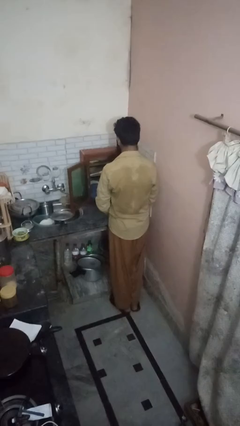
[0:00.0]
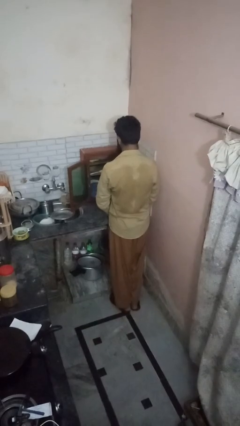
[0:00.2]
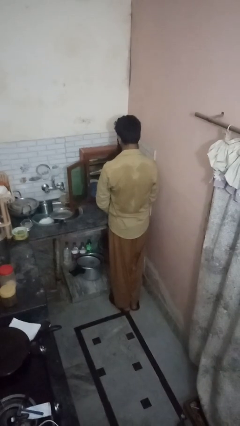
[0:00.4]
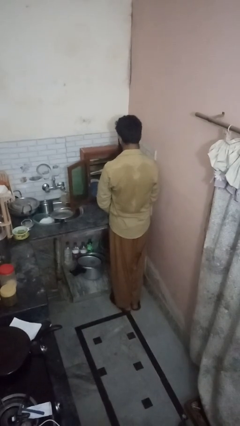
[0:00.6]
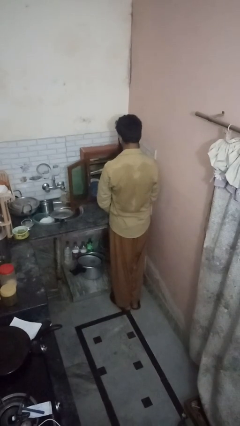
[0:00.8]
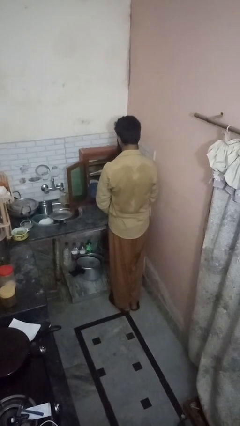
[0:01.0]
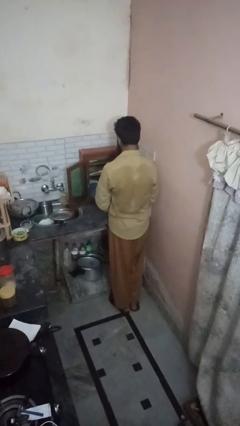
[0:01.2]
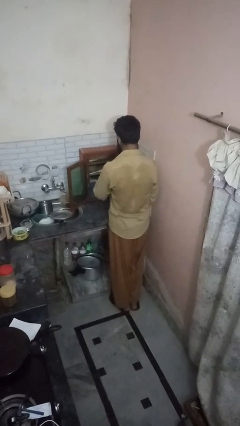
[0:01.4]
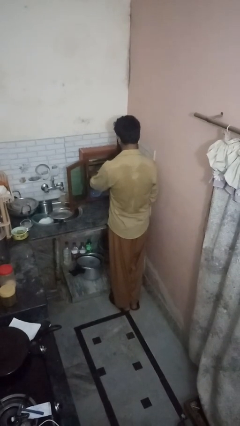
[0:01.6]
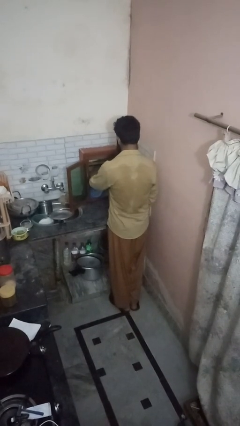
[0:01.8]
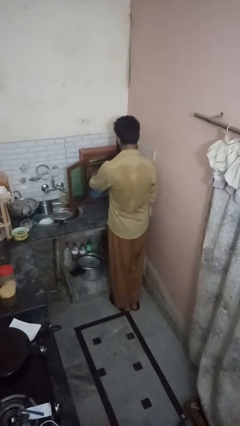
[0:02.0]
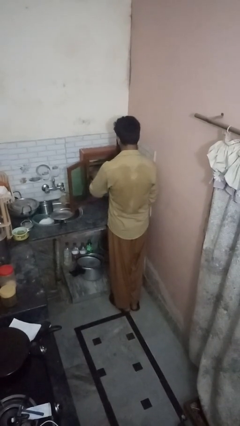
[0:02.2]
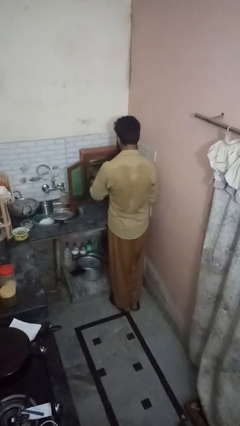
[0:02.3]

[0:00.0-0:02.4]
person puts object in cabinet

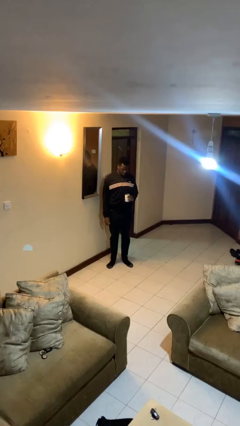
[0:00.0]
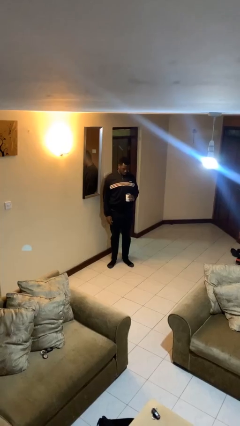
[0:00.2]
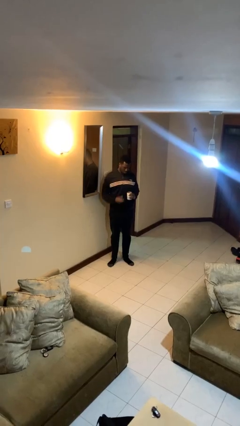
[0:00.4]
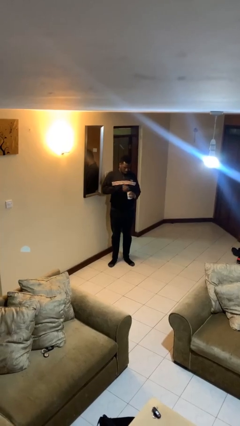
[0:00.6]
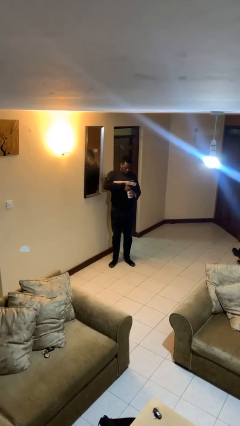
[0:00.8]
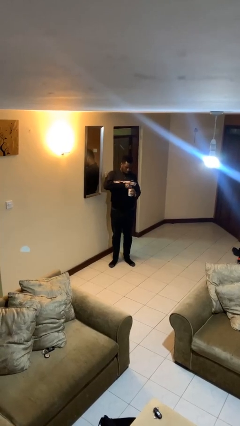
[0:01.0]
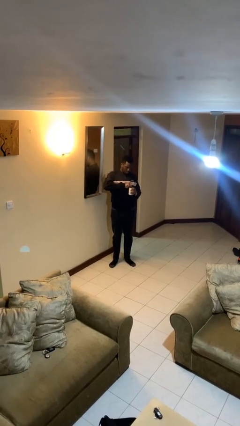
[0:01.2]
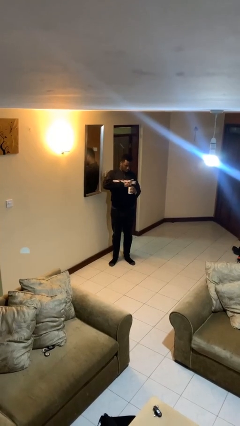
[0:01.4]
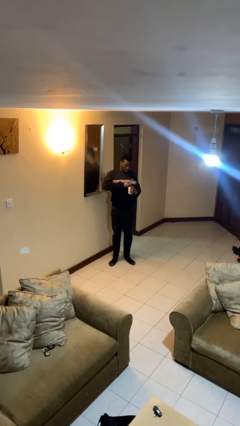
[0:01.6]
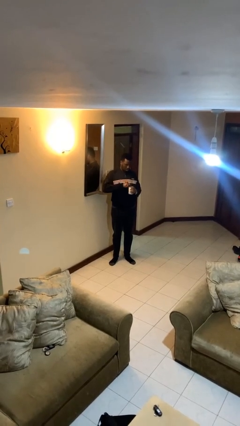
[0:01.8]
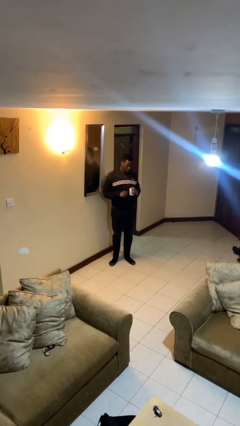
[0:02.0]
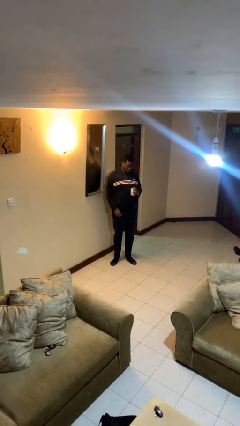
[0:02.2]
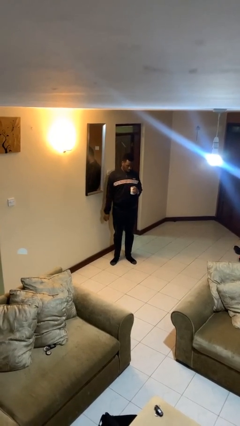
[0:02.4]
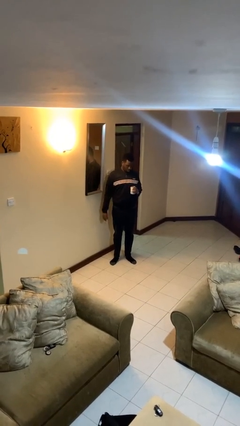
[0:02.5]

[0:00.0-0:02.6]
person opens beverage can

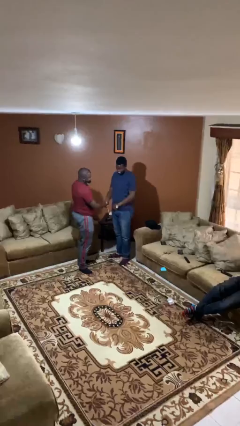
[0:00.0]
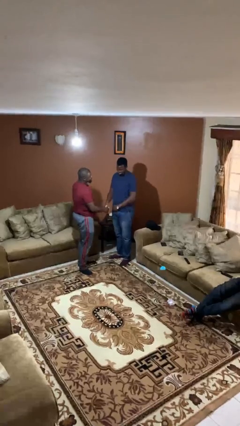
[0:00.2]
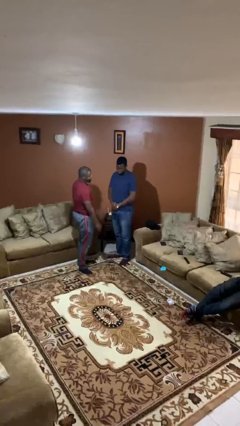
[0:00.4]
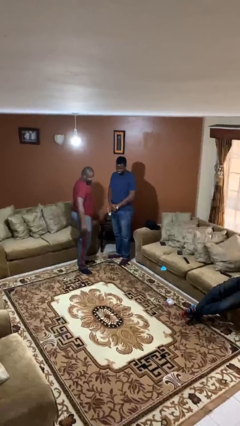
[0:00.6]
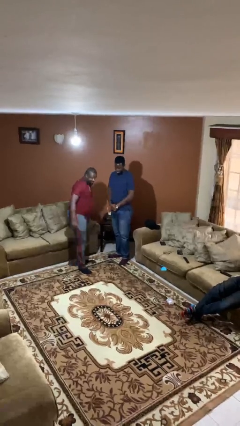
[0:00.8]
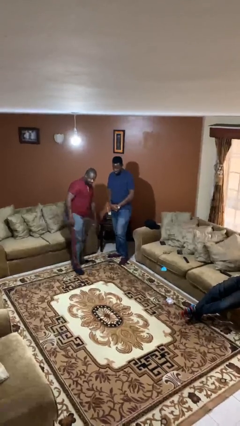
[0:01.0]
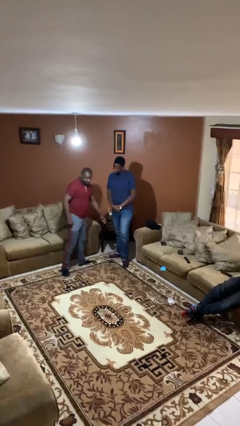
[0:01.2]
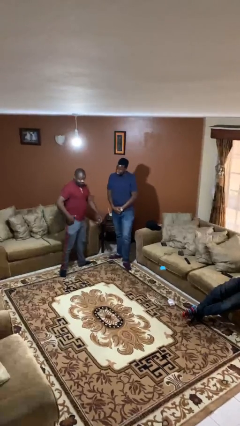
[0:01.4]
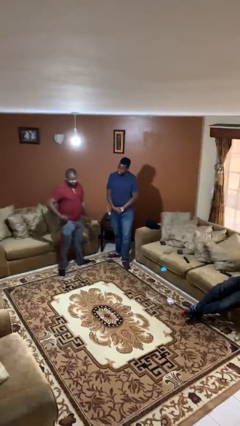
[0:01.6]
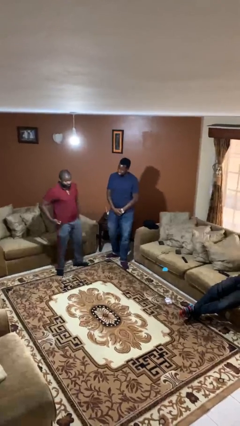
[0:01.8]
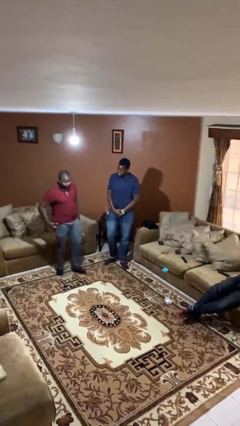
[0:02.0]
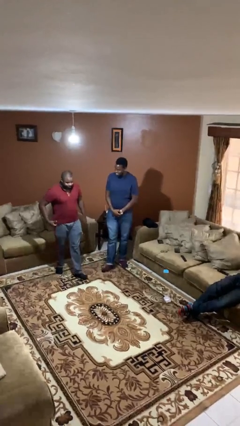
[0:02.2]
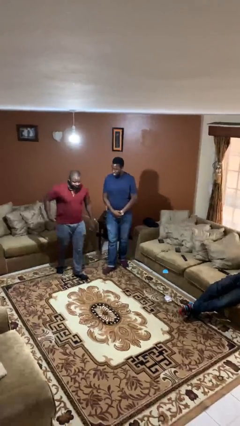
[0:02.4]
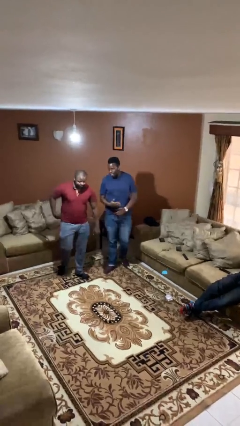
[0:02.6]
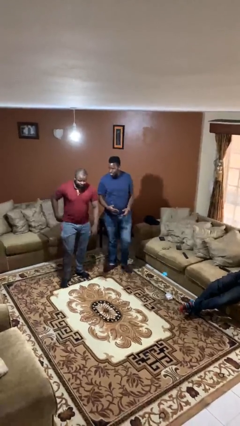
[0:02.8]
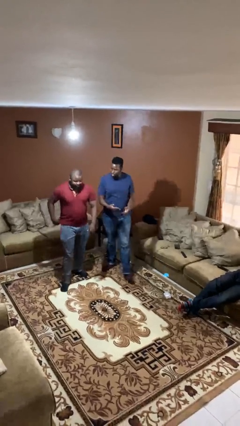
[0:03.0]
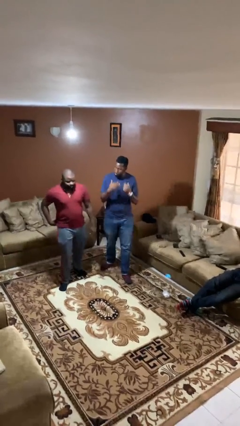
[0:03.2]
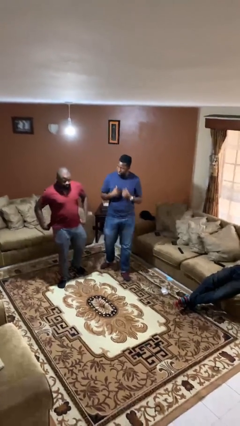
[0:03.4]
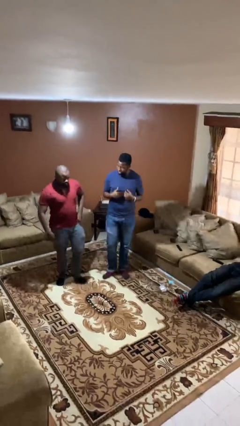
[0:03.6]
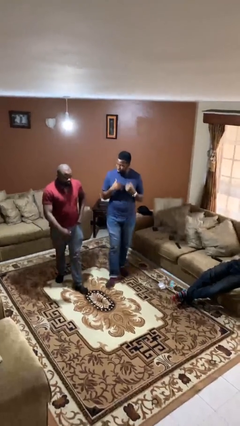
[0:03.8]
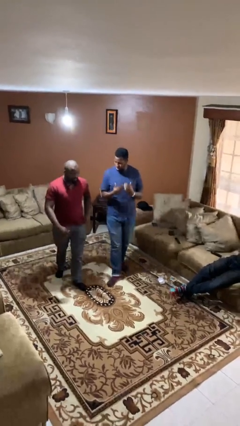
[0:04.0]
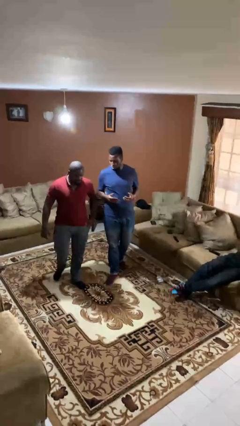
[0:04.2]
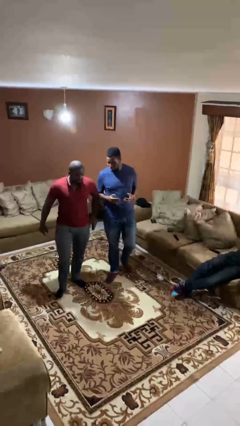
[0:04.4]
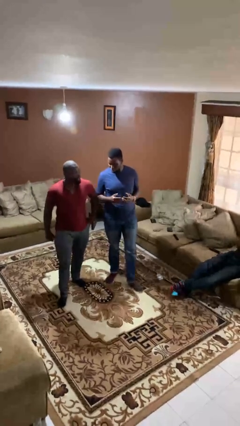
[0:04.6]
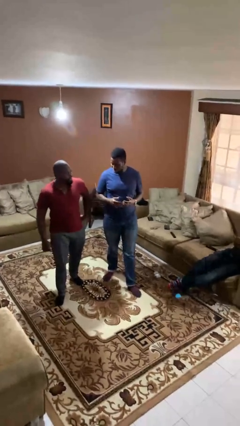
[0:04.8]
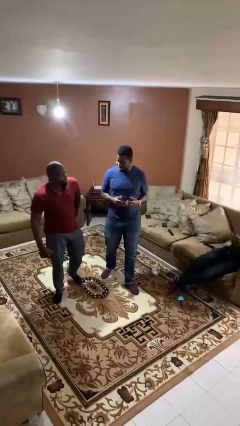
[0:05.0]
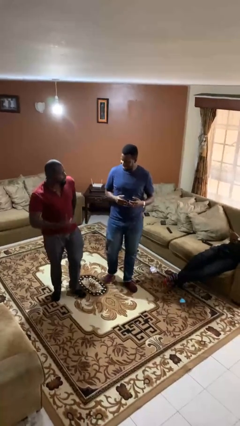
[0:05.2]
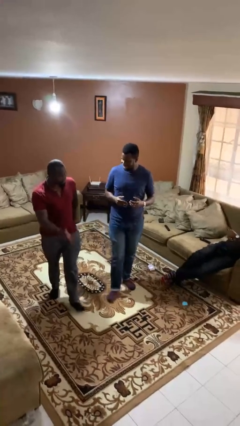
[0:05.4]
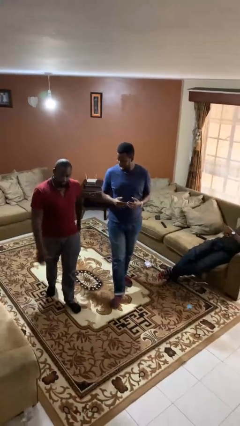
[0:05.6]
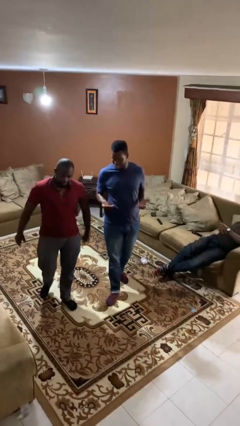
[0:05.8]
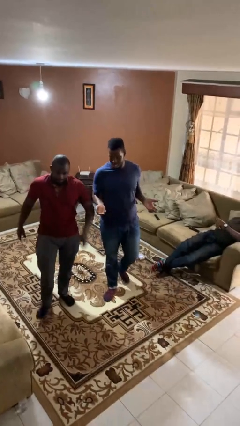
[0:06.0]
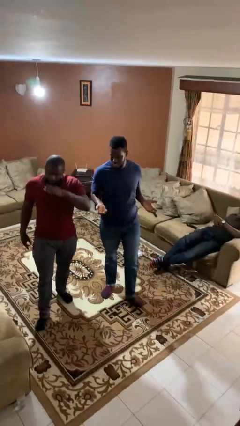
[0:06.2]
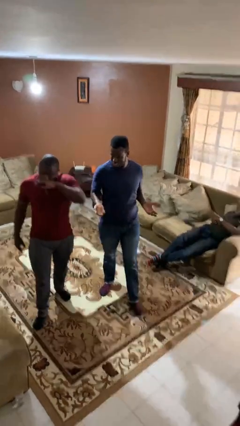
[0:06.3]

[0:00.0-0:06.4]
person talks to person

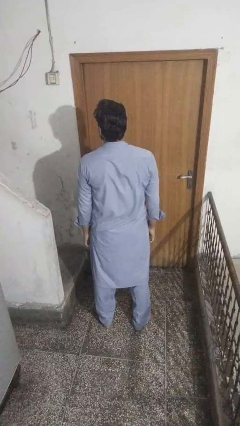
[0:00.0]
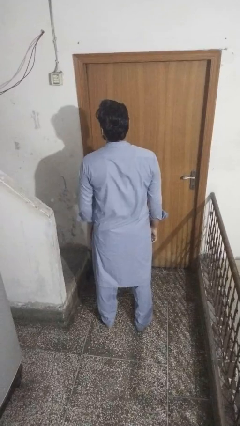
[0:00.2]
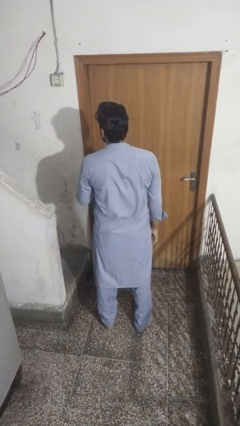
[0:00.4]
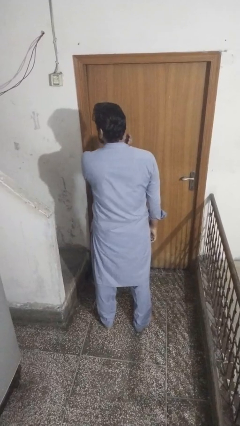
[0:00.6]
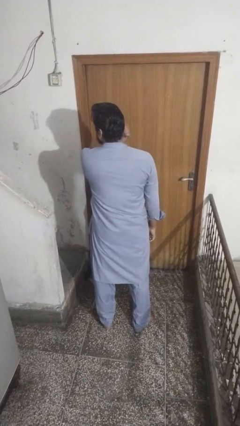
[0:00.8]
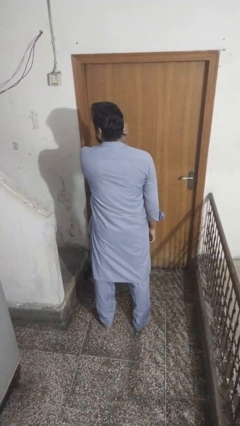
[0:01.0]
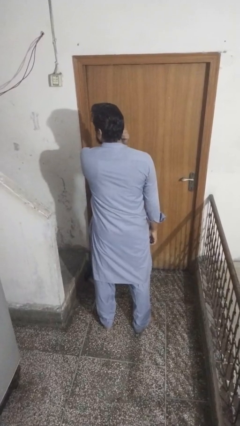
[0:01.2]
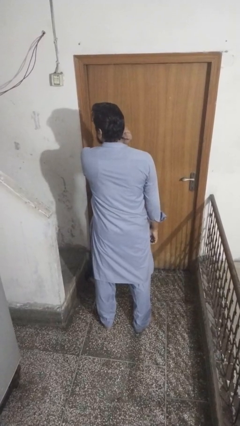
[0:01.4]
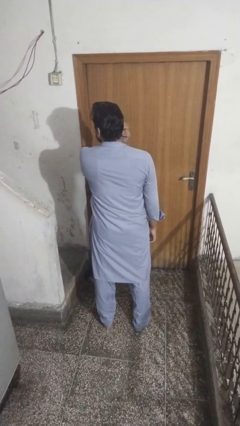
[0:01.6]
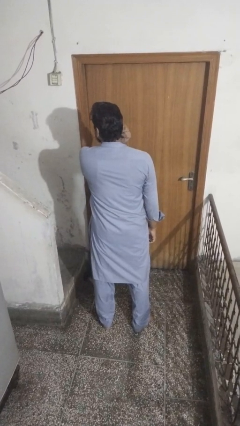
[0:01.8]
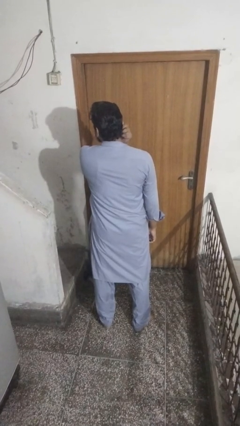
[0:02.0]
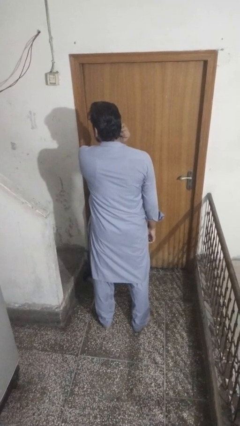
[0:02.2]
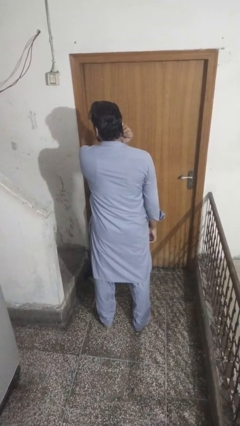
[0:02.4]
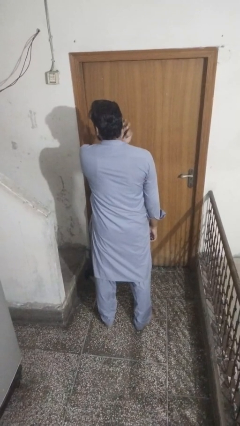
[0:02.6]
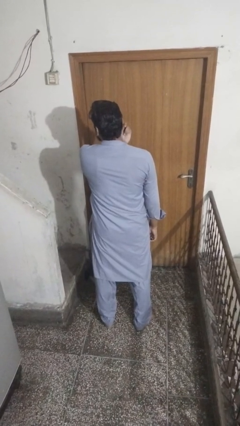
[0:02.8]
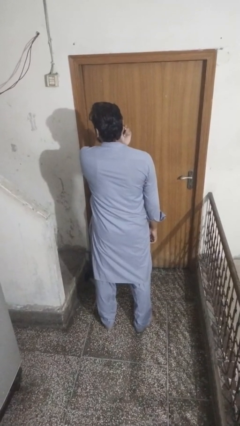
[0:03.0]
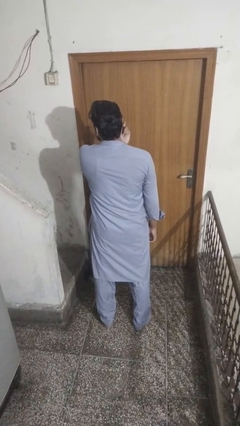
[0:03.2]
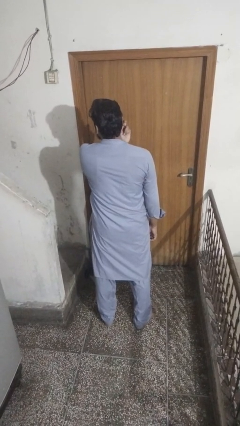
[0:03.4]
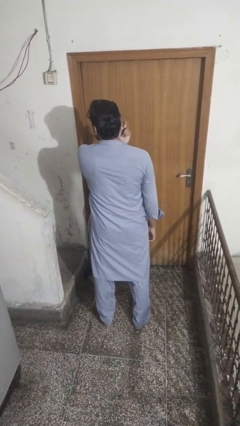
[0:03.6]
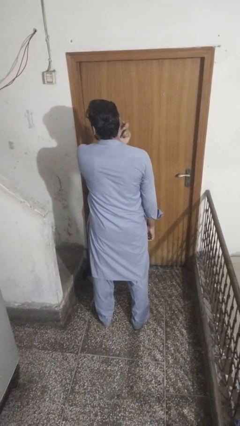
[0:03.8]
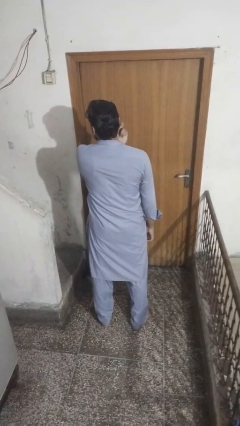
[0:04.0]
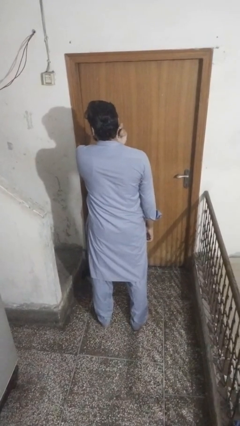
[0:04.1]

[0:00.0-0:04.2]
person touches earlobe

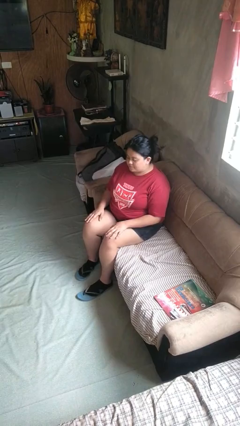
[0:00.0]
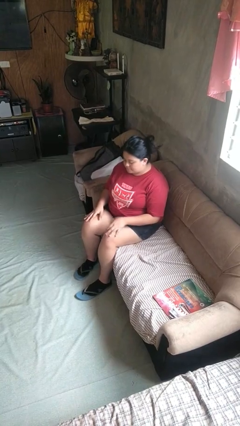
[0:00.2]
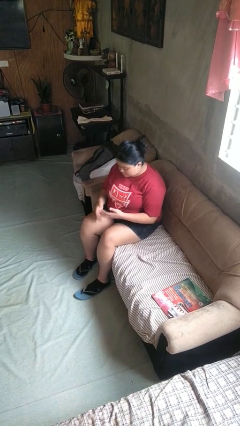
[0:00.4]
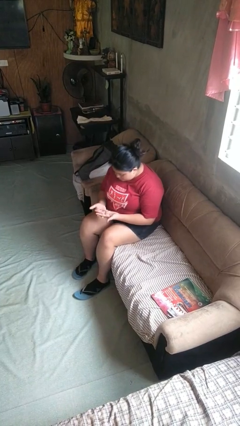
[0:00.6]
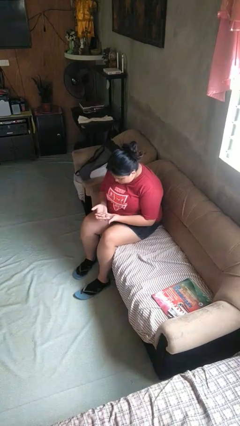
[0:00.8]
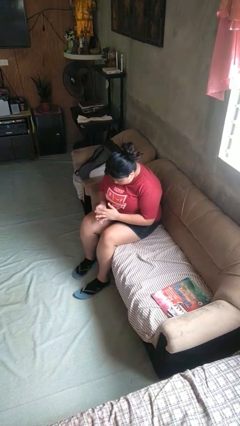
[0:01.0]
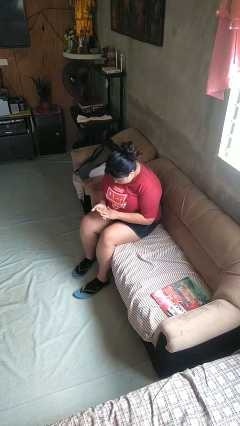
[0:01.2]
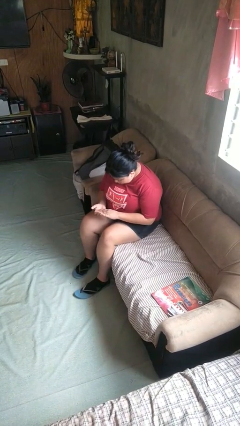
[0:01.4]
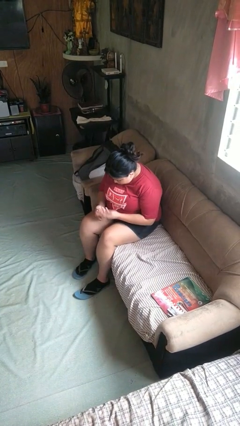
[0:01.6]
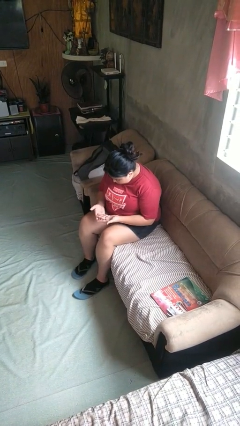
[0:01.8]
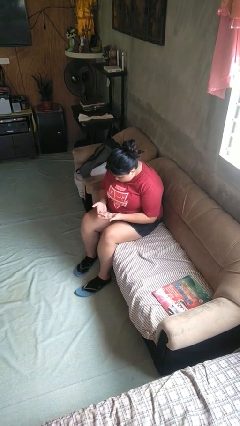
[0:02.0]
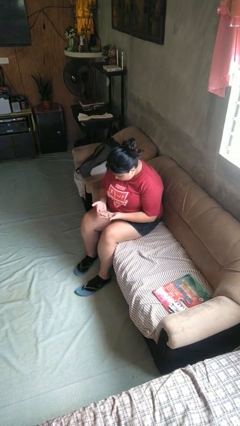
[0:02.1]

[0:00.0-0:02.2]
person looks at hands in lap
